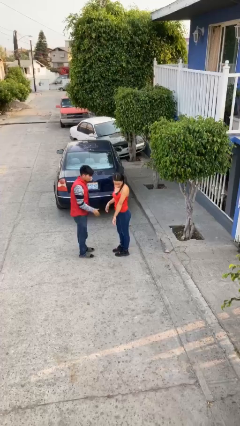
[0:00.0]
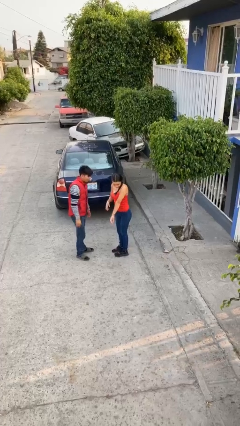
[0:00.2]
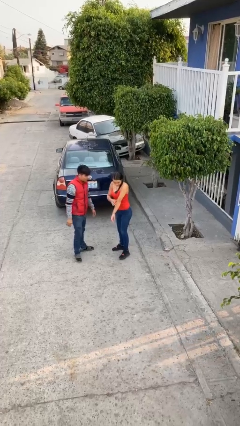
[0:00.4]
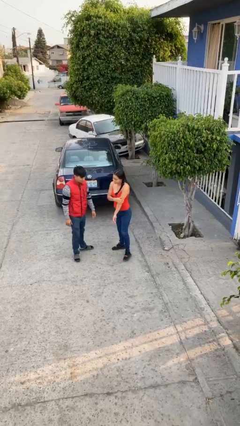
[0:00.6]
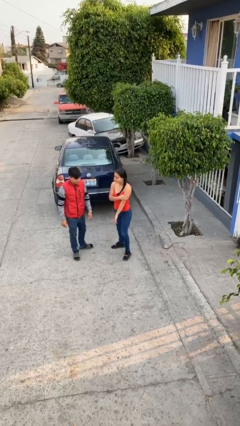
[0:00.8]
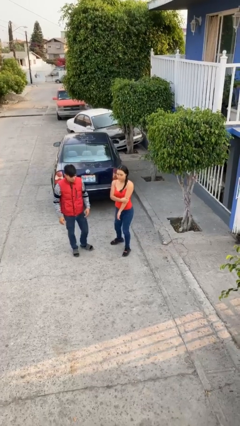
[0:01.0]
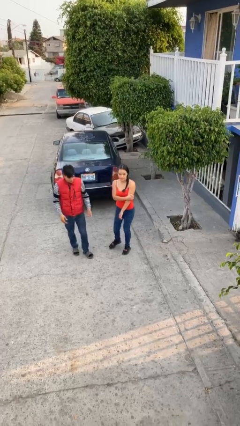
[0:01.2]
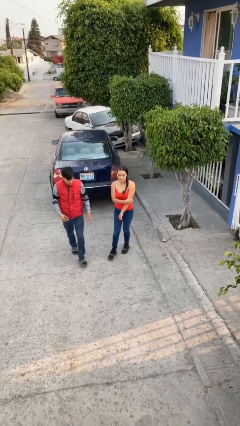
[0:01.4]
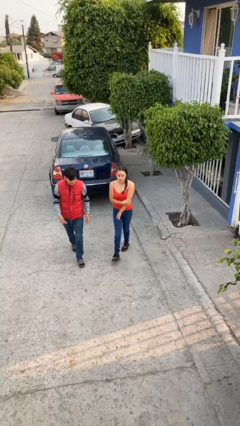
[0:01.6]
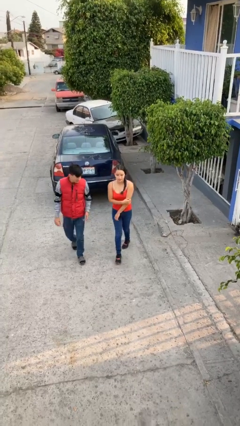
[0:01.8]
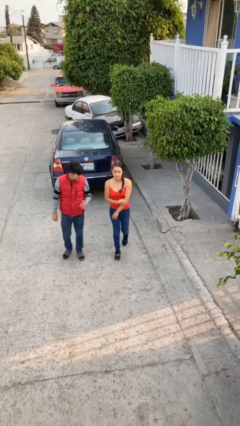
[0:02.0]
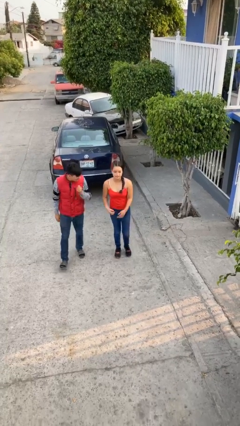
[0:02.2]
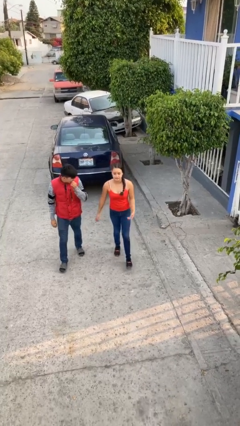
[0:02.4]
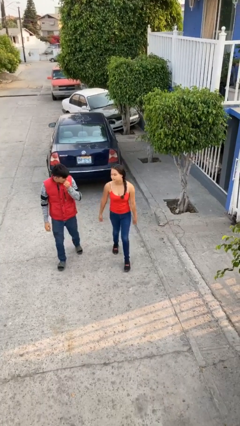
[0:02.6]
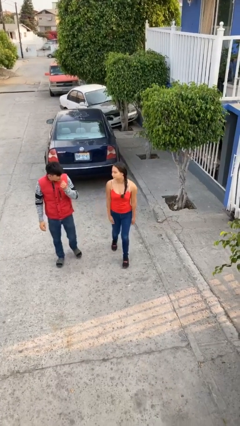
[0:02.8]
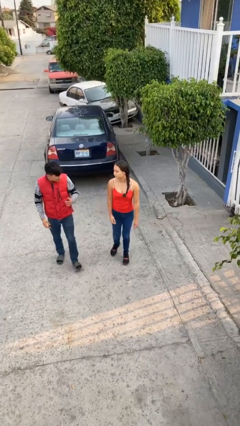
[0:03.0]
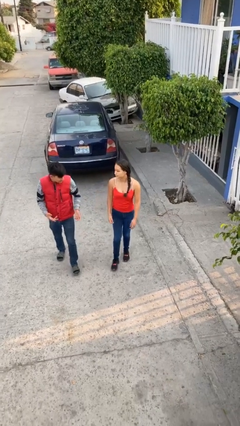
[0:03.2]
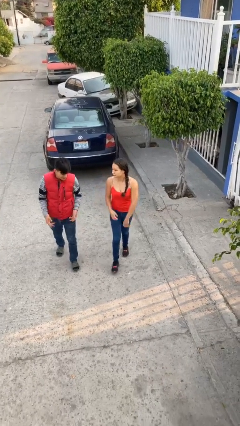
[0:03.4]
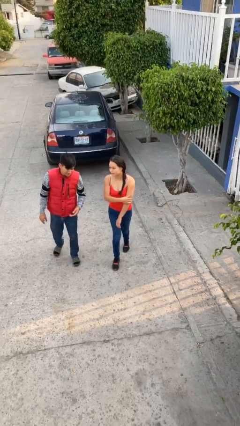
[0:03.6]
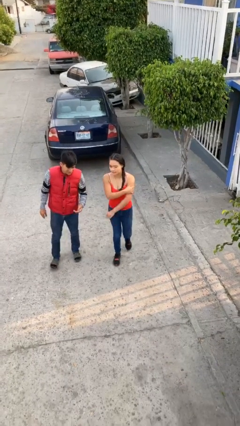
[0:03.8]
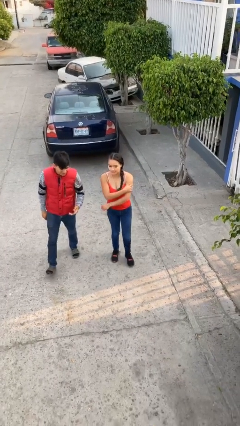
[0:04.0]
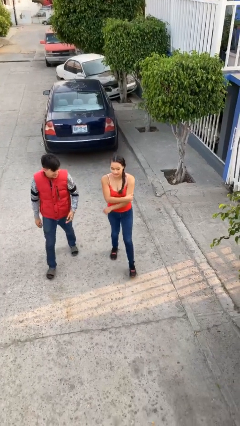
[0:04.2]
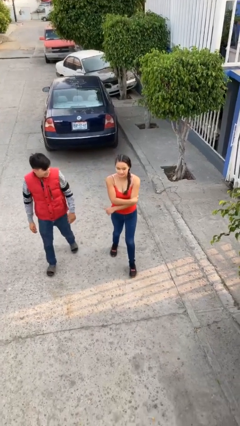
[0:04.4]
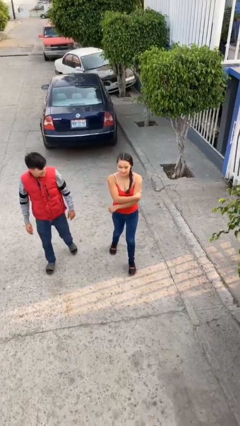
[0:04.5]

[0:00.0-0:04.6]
person talks to person

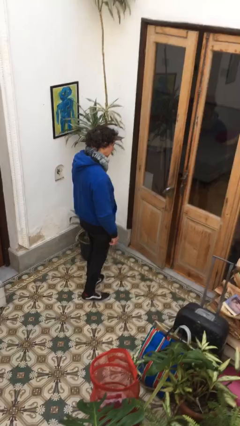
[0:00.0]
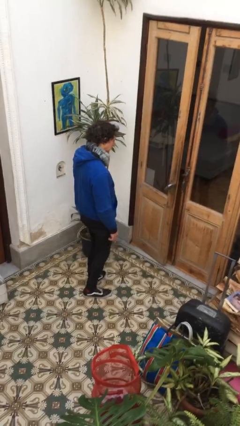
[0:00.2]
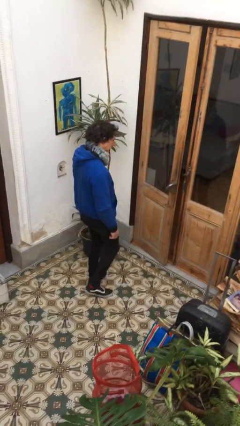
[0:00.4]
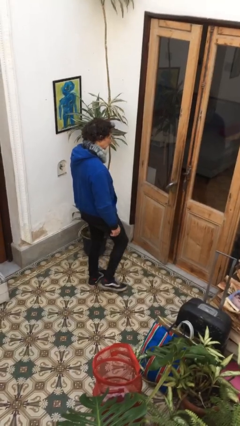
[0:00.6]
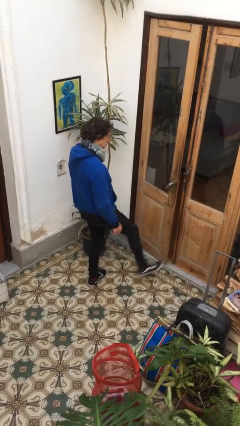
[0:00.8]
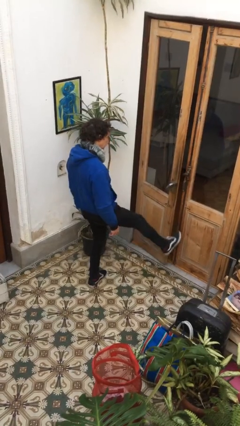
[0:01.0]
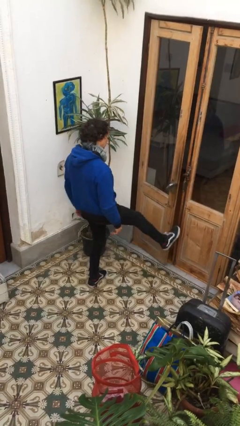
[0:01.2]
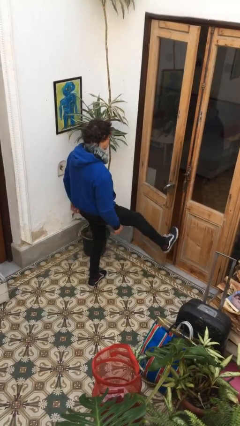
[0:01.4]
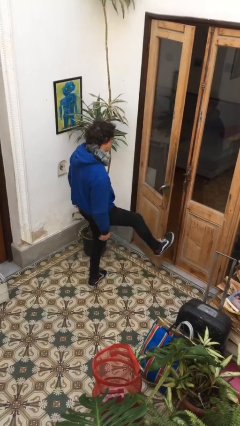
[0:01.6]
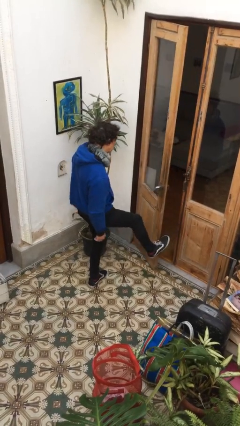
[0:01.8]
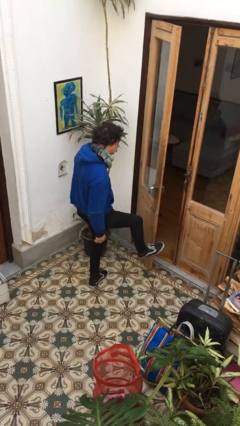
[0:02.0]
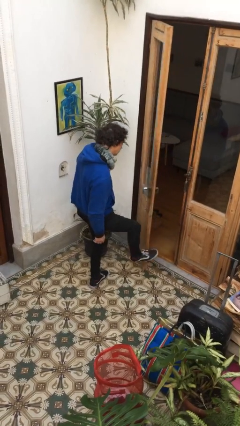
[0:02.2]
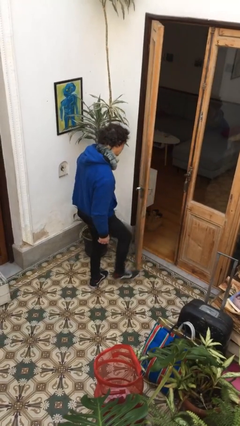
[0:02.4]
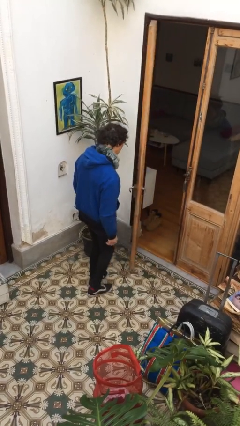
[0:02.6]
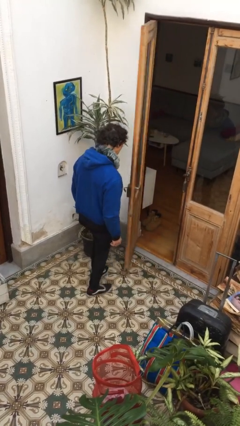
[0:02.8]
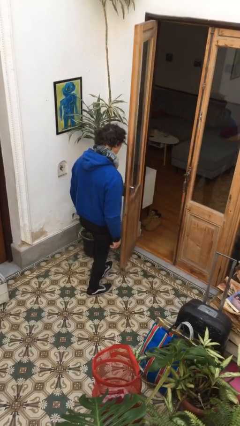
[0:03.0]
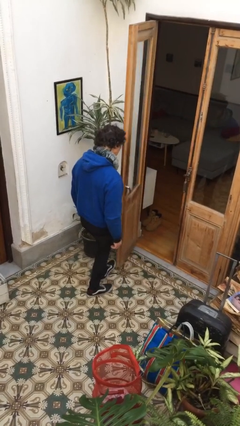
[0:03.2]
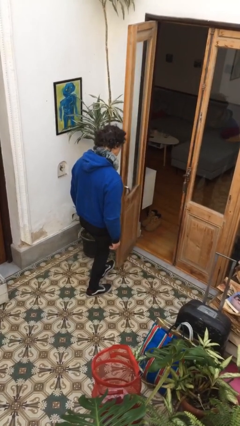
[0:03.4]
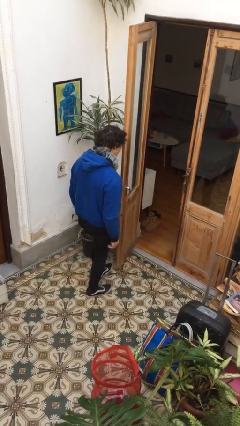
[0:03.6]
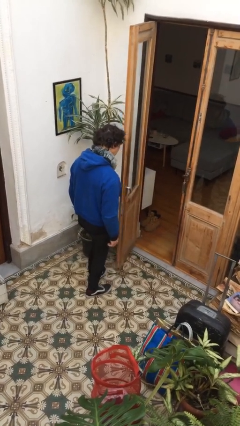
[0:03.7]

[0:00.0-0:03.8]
person opens facility door

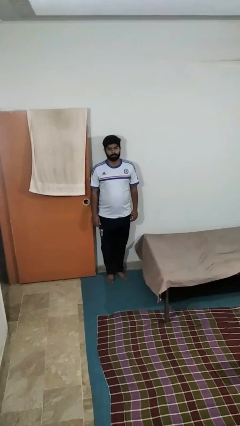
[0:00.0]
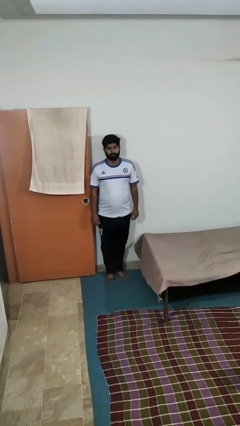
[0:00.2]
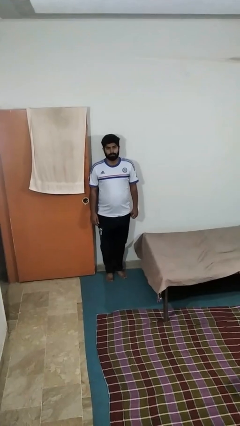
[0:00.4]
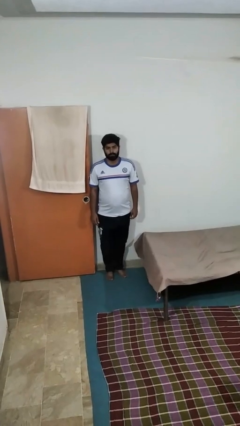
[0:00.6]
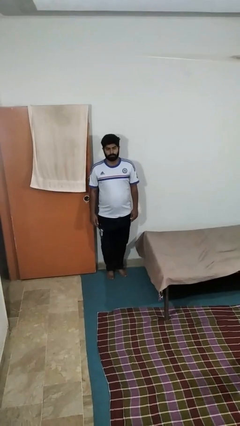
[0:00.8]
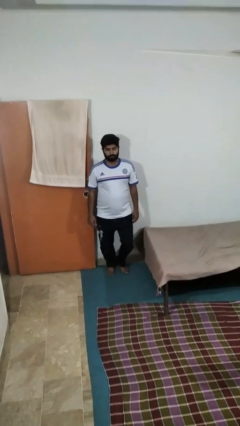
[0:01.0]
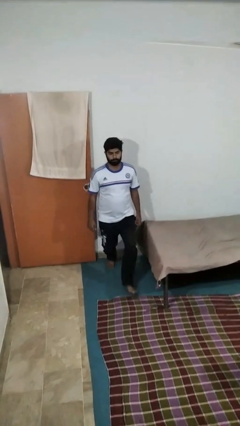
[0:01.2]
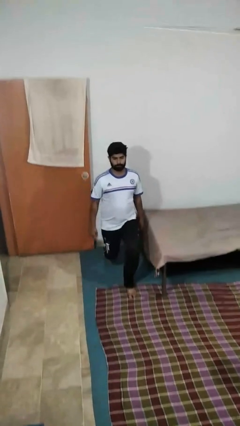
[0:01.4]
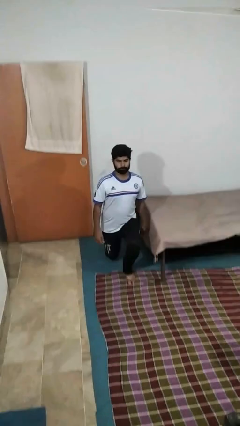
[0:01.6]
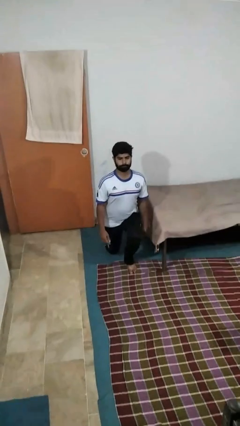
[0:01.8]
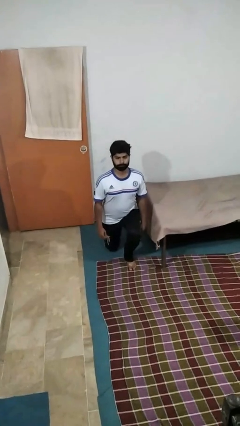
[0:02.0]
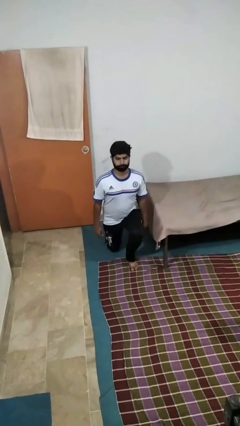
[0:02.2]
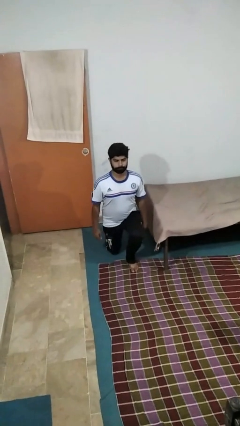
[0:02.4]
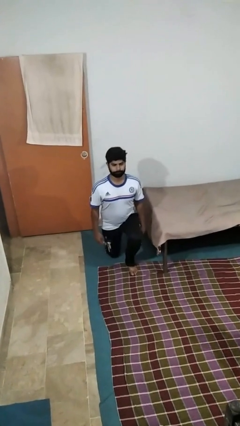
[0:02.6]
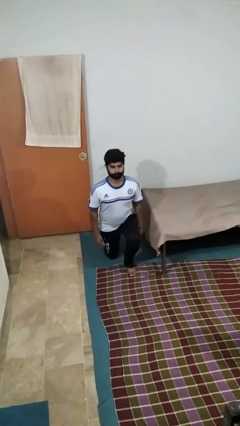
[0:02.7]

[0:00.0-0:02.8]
person kneels

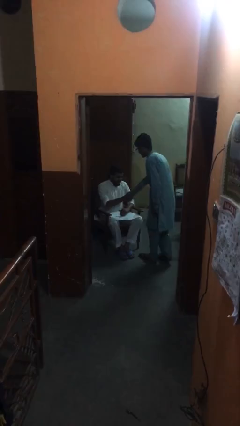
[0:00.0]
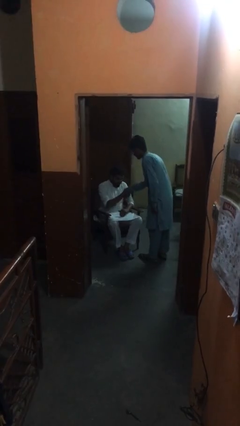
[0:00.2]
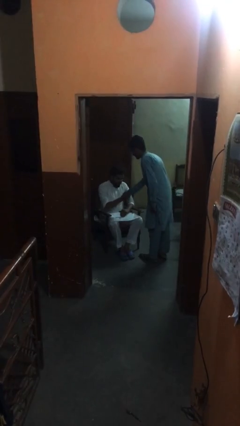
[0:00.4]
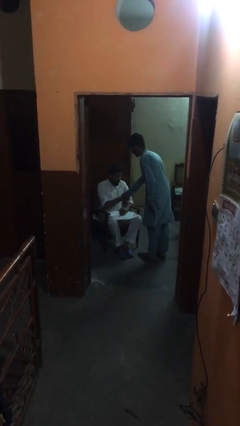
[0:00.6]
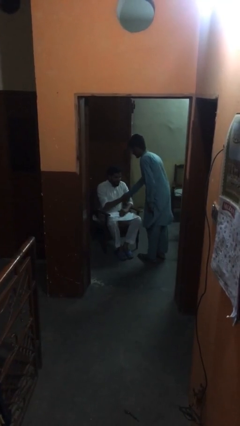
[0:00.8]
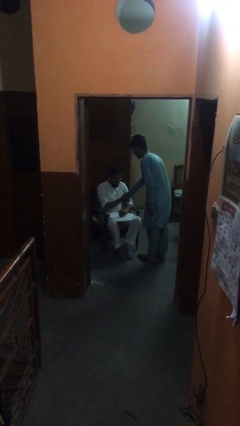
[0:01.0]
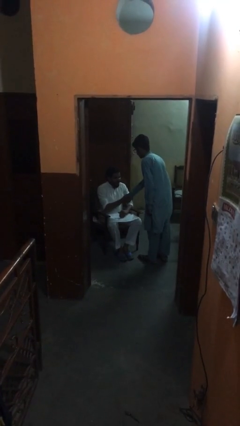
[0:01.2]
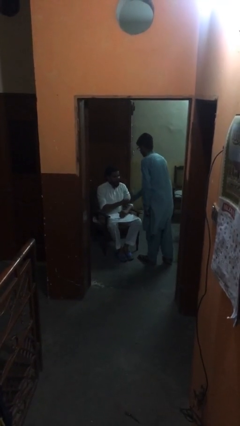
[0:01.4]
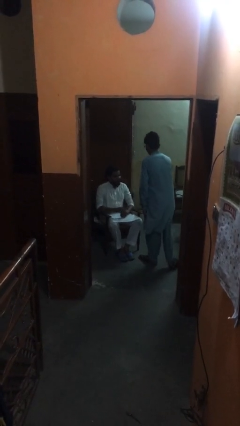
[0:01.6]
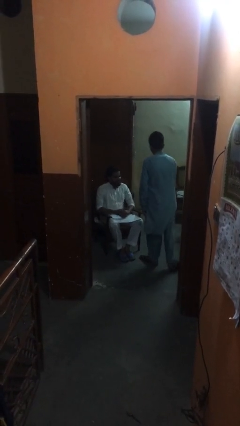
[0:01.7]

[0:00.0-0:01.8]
person shakes hand

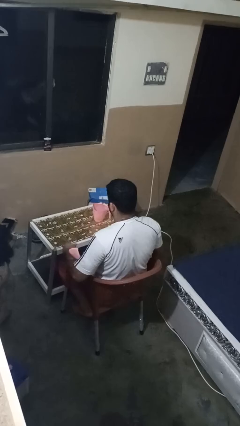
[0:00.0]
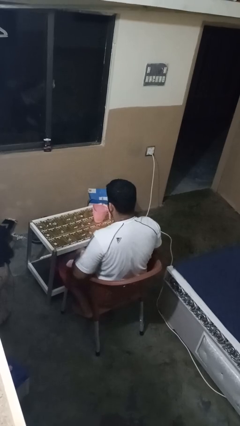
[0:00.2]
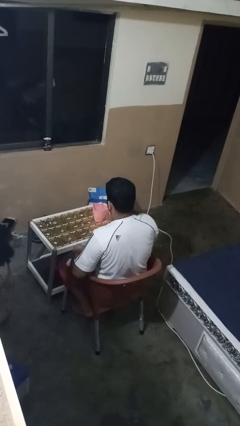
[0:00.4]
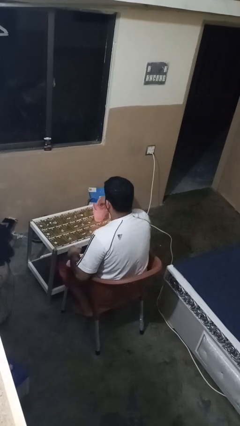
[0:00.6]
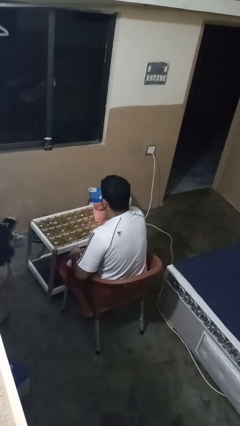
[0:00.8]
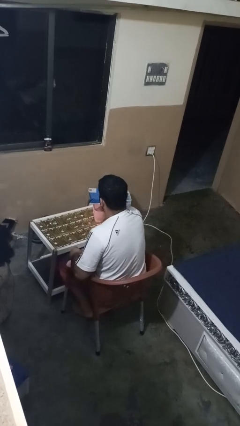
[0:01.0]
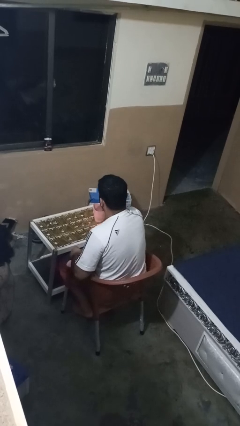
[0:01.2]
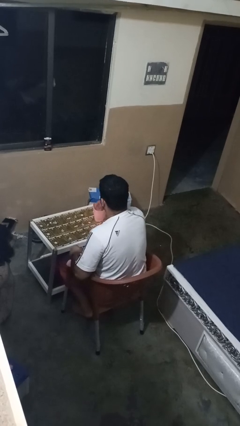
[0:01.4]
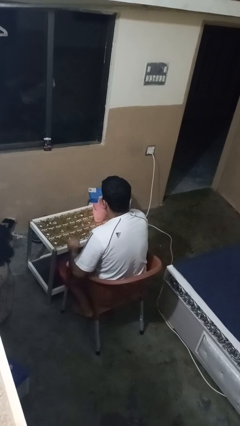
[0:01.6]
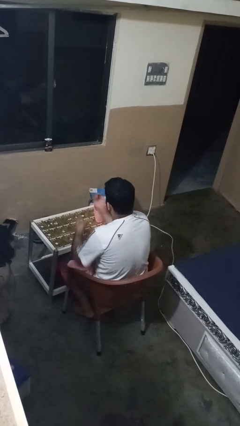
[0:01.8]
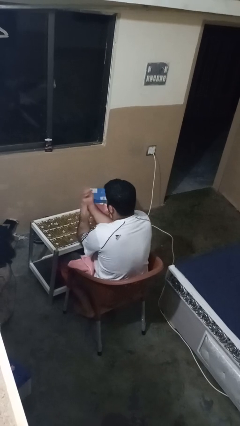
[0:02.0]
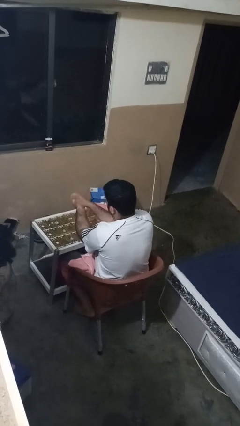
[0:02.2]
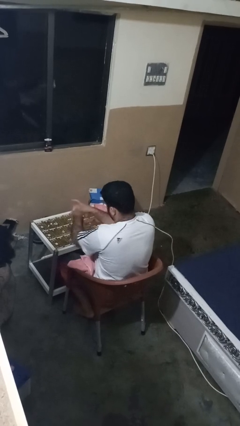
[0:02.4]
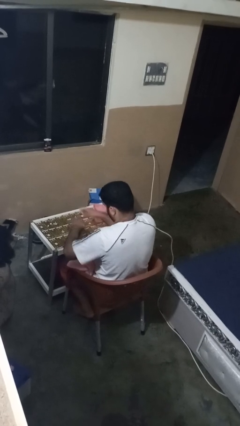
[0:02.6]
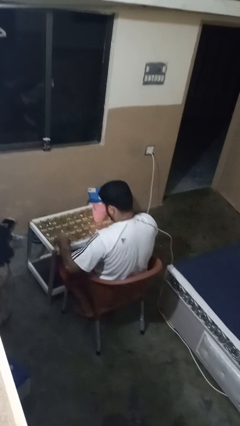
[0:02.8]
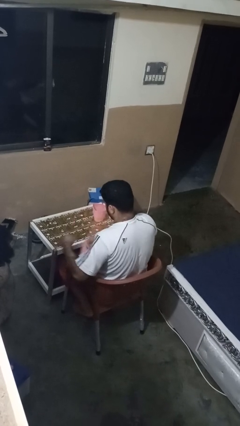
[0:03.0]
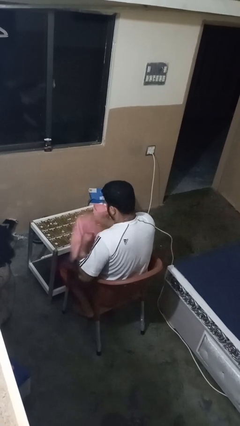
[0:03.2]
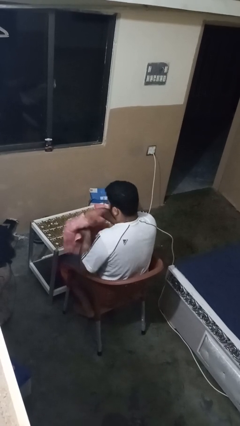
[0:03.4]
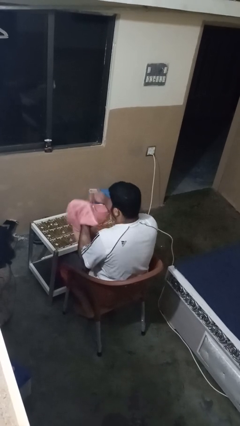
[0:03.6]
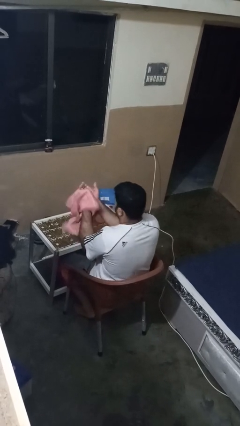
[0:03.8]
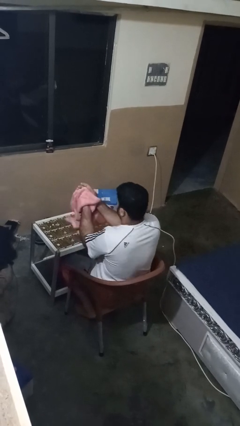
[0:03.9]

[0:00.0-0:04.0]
person washes hands

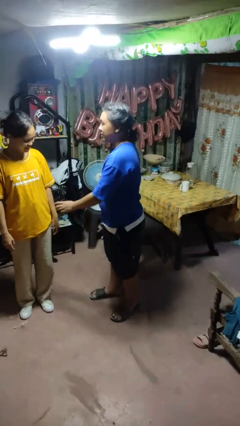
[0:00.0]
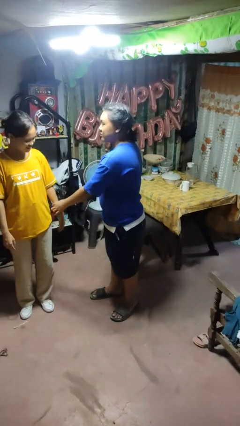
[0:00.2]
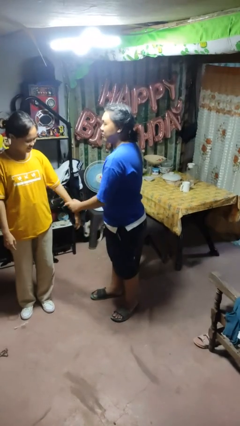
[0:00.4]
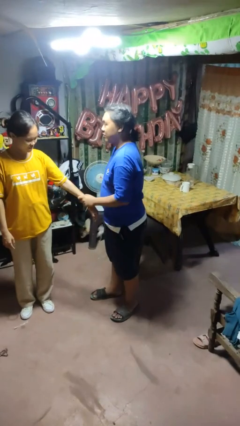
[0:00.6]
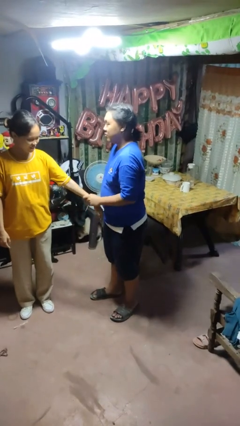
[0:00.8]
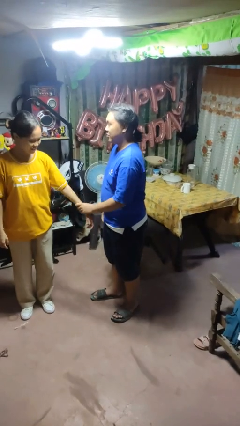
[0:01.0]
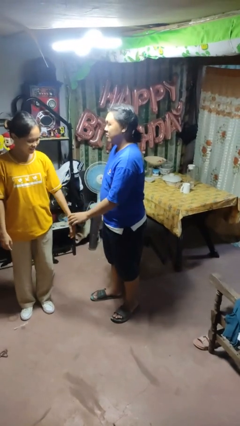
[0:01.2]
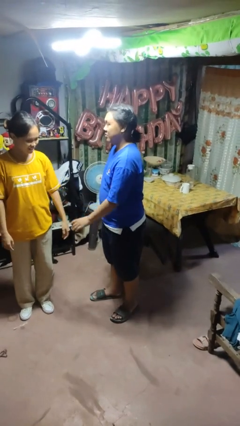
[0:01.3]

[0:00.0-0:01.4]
person grabs person by forearm
